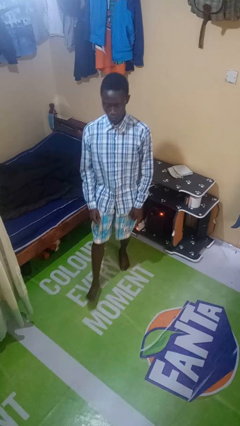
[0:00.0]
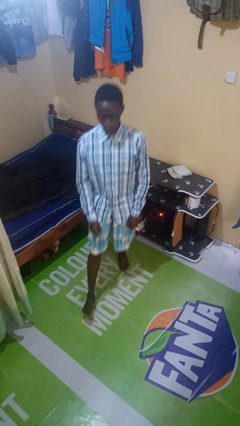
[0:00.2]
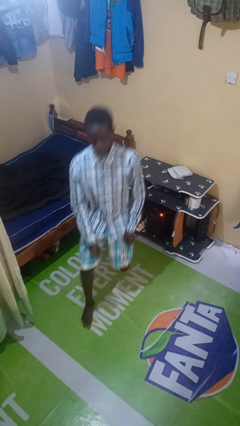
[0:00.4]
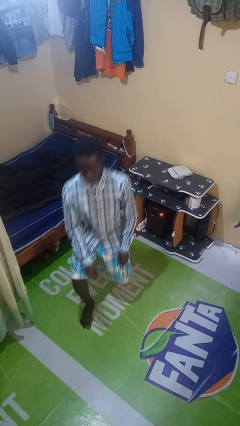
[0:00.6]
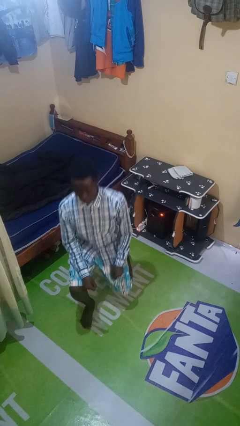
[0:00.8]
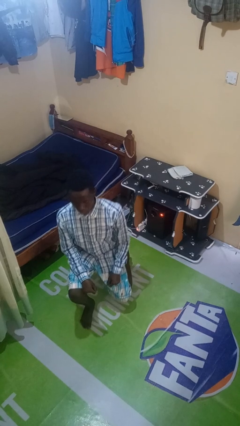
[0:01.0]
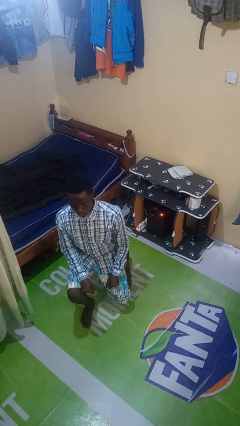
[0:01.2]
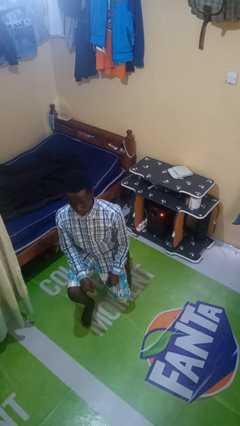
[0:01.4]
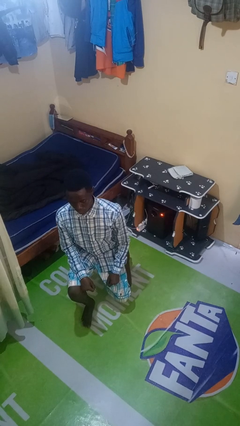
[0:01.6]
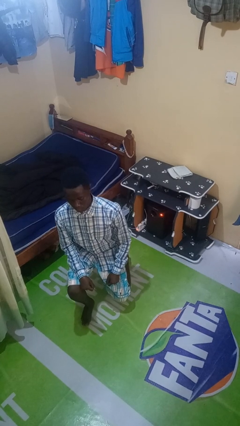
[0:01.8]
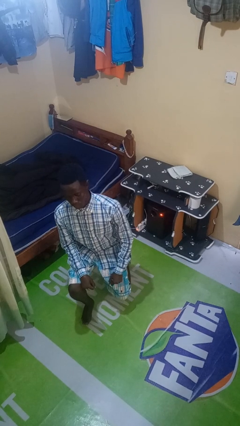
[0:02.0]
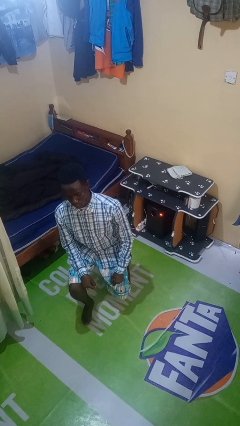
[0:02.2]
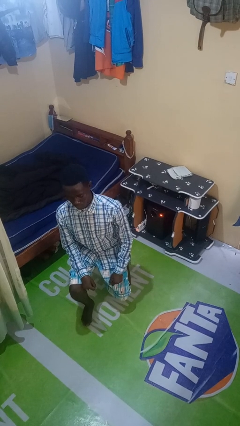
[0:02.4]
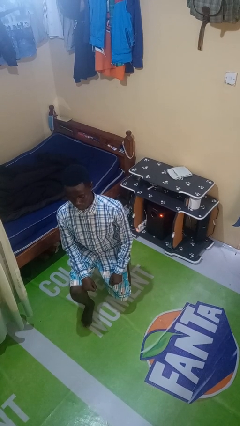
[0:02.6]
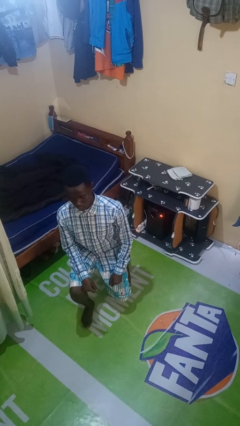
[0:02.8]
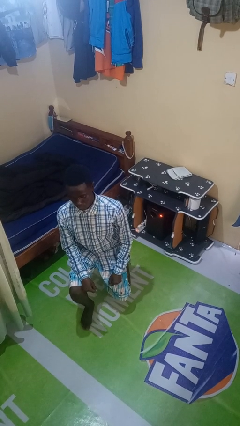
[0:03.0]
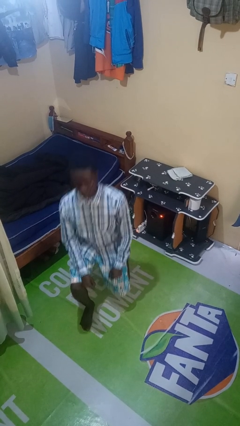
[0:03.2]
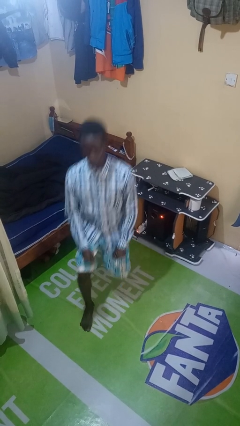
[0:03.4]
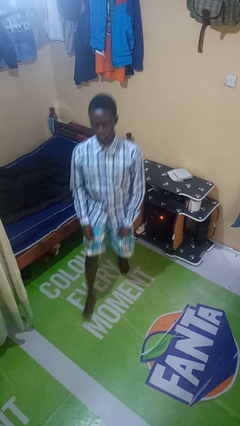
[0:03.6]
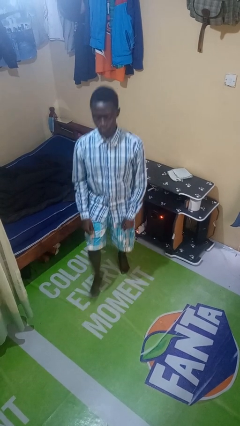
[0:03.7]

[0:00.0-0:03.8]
person exercises with lunges

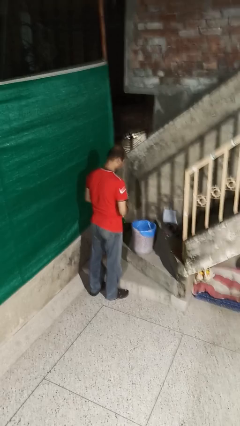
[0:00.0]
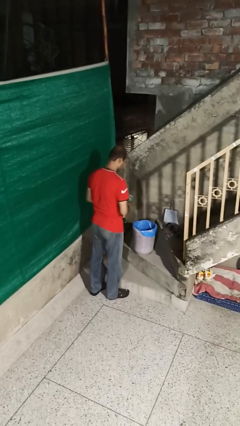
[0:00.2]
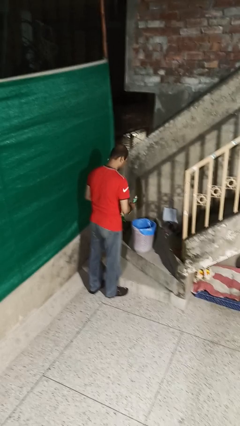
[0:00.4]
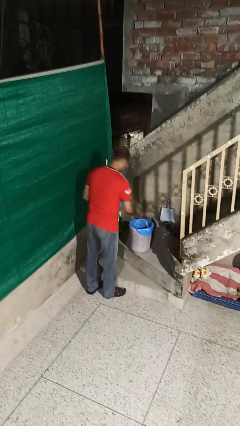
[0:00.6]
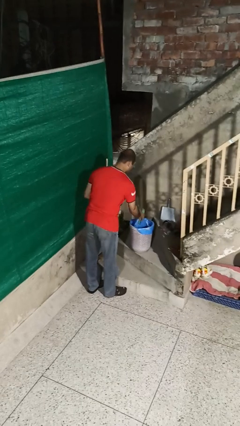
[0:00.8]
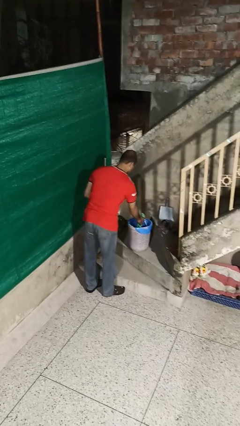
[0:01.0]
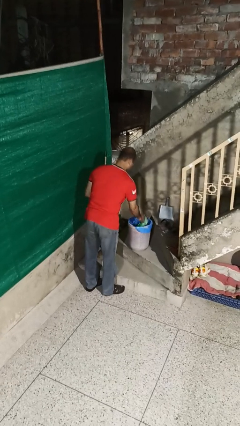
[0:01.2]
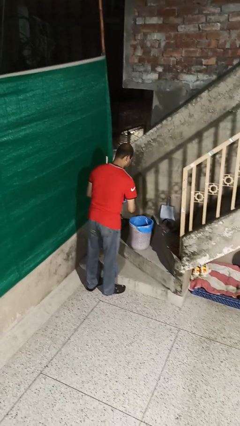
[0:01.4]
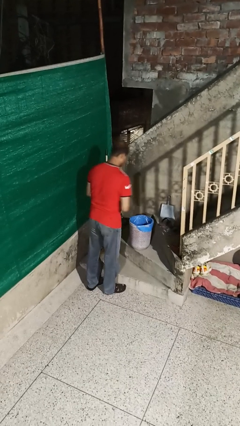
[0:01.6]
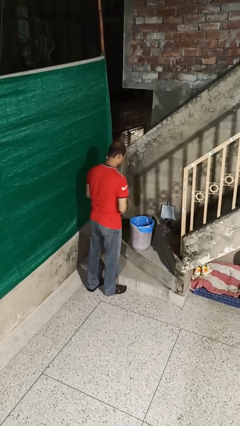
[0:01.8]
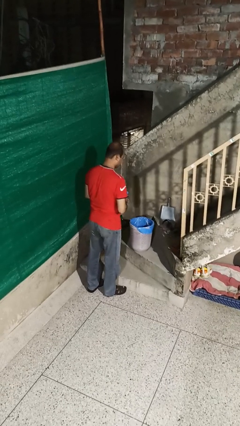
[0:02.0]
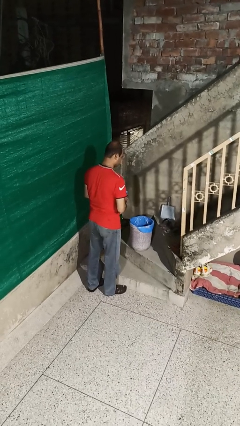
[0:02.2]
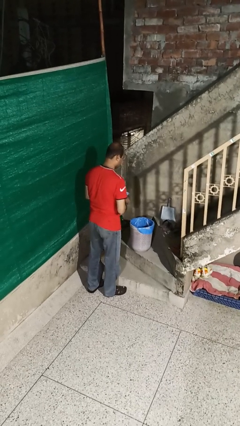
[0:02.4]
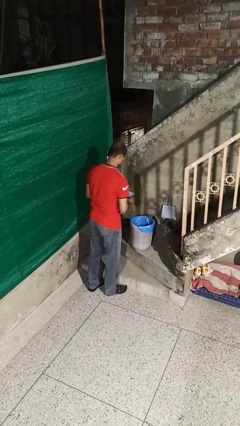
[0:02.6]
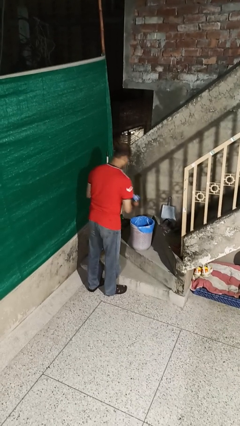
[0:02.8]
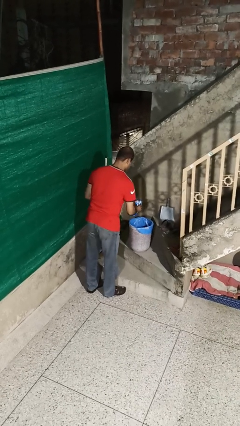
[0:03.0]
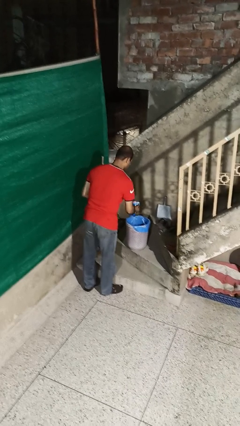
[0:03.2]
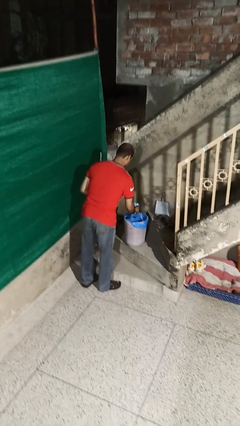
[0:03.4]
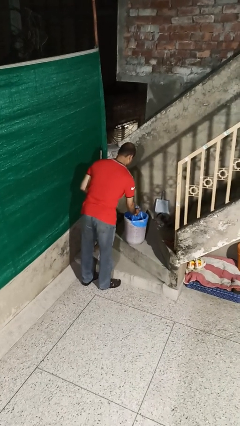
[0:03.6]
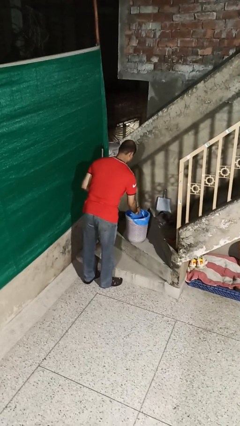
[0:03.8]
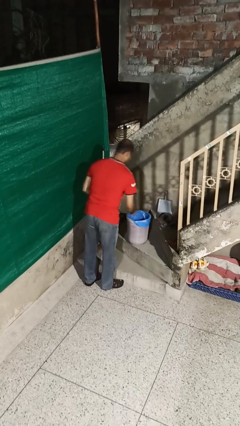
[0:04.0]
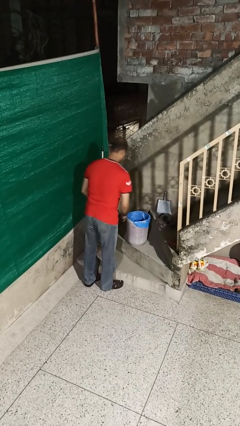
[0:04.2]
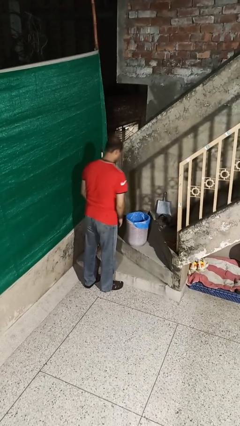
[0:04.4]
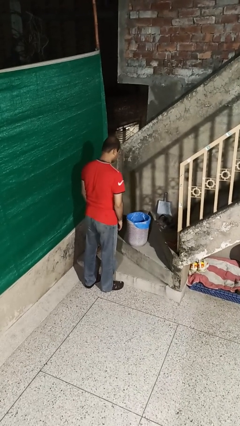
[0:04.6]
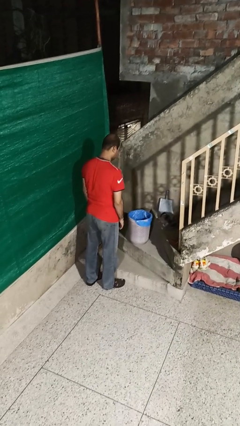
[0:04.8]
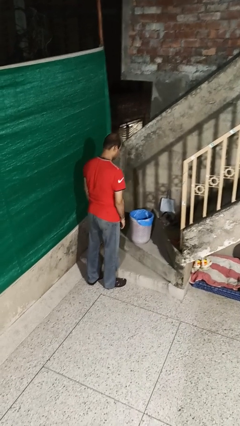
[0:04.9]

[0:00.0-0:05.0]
person discards trash

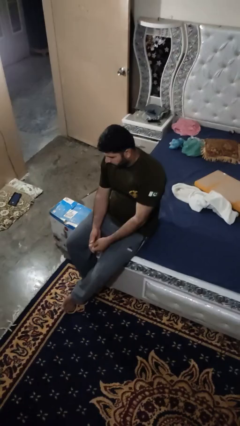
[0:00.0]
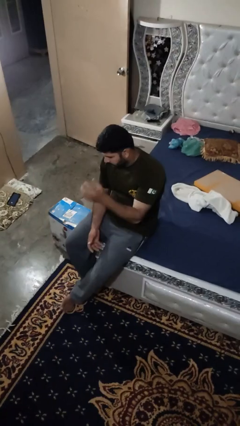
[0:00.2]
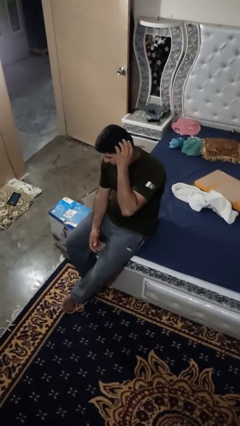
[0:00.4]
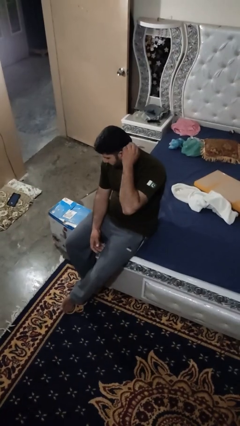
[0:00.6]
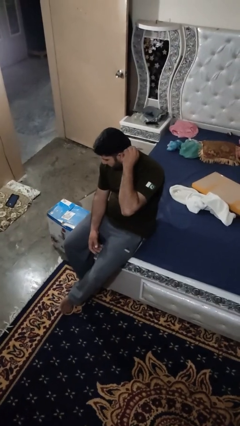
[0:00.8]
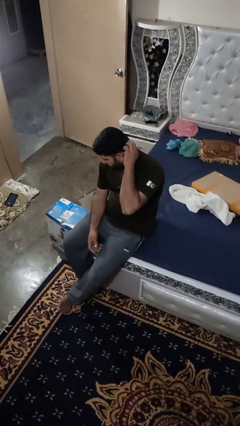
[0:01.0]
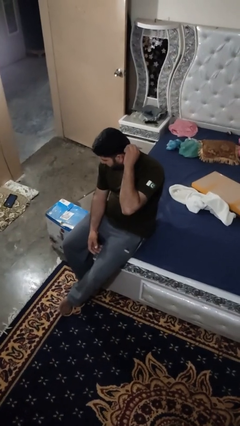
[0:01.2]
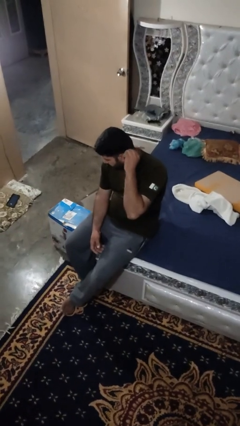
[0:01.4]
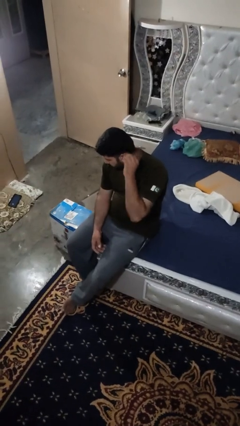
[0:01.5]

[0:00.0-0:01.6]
person strokes hair

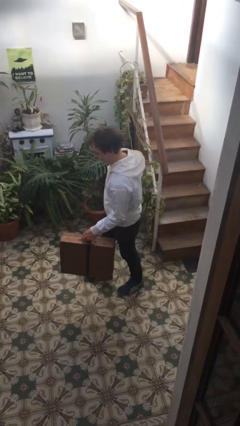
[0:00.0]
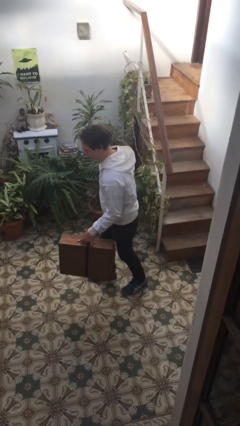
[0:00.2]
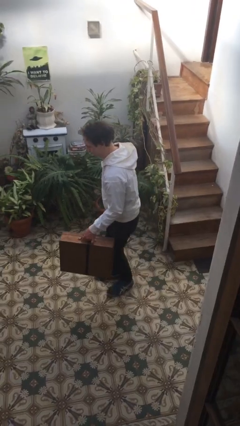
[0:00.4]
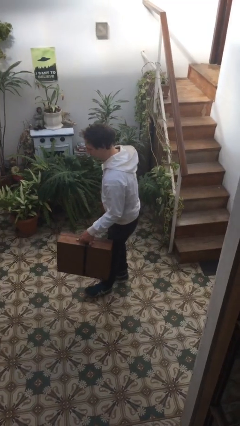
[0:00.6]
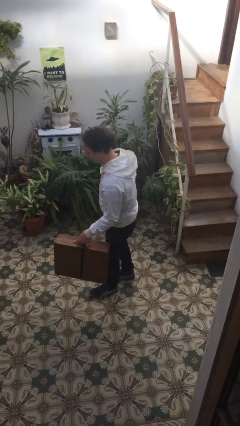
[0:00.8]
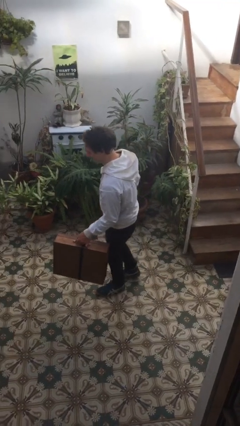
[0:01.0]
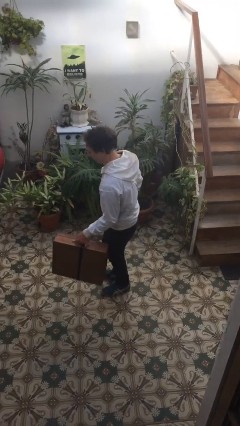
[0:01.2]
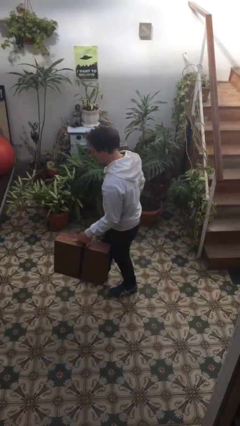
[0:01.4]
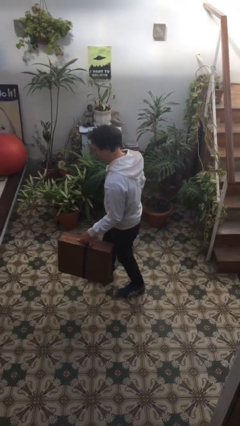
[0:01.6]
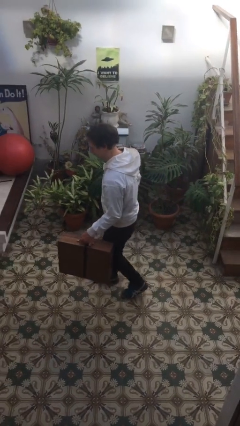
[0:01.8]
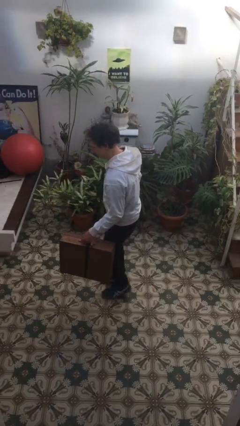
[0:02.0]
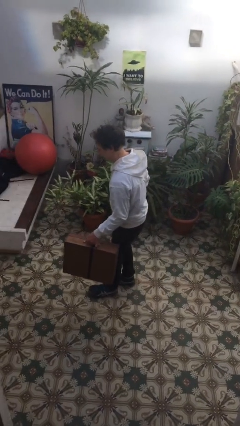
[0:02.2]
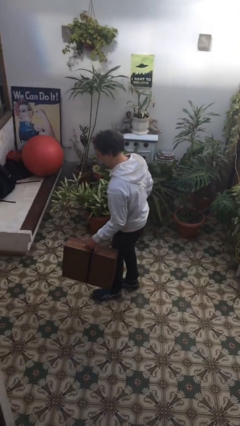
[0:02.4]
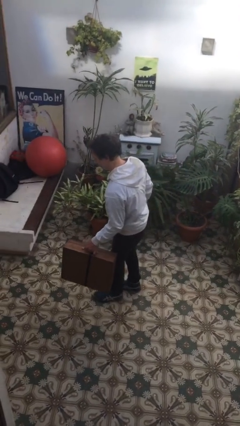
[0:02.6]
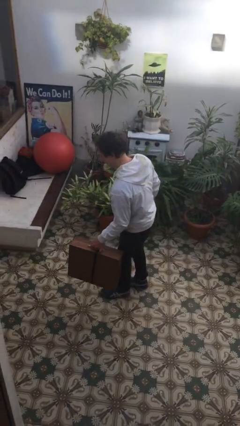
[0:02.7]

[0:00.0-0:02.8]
person carries heavy object

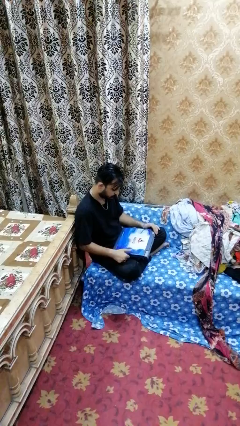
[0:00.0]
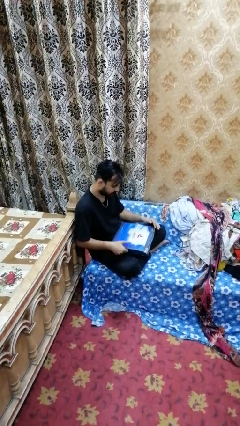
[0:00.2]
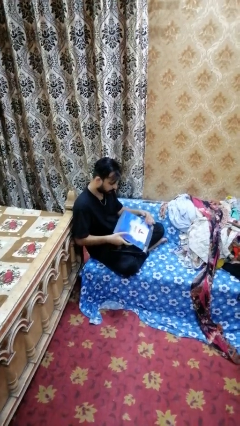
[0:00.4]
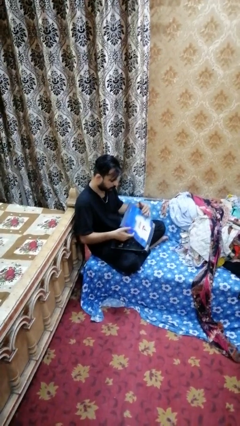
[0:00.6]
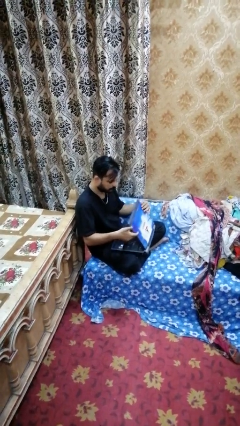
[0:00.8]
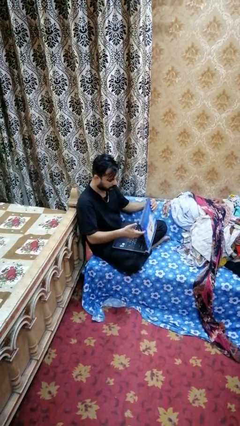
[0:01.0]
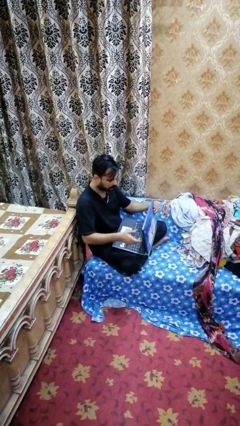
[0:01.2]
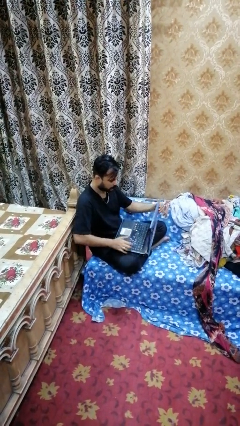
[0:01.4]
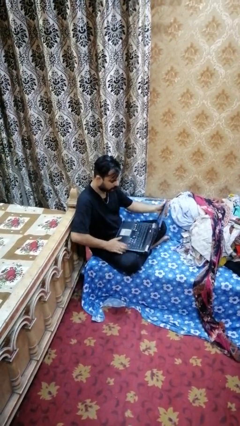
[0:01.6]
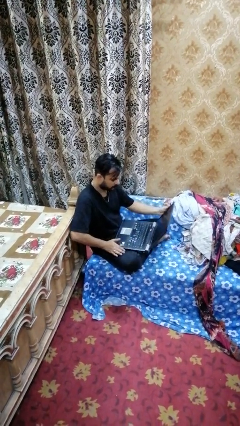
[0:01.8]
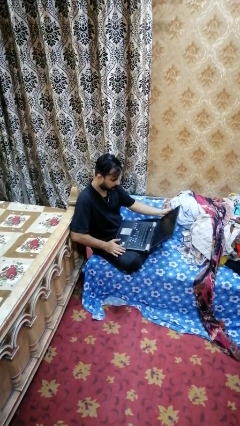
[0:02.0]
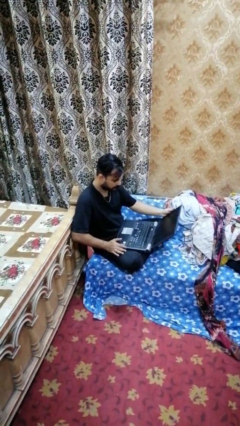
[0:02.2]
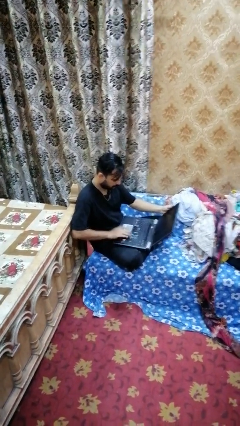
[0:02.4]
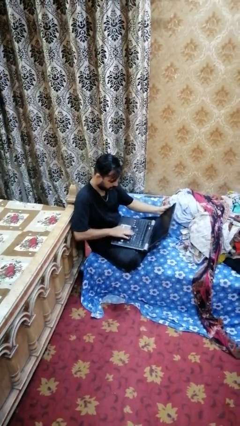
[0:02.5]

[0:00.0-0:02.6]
person opens laptop

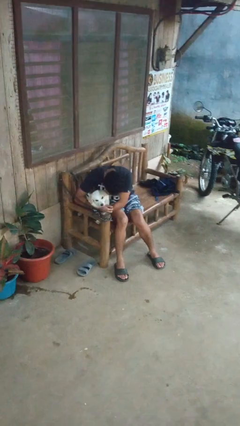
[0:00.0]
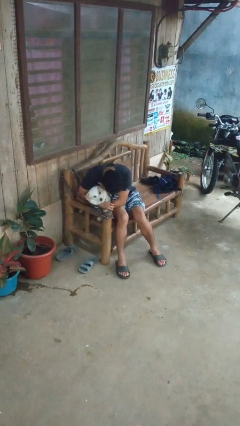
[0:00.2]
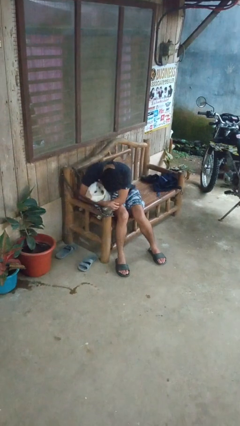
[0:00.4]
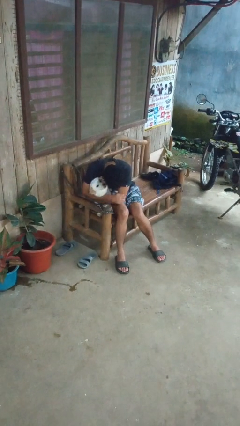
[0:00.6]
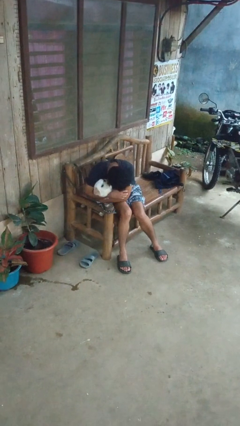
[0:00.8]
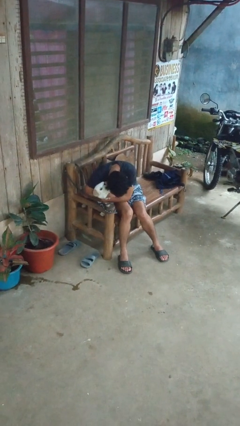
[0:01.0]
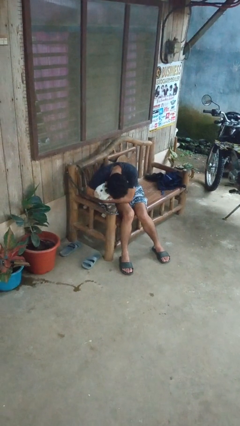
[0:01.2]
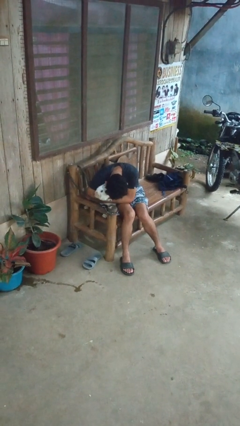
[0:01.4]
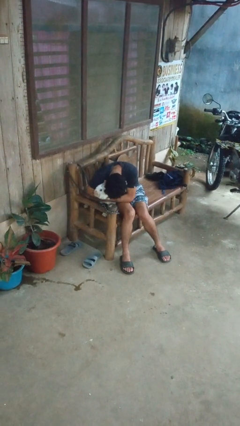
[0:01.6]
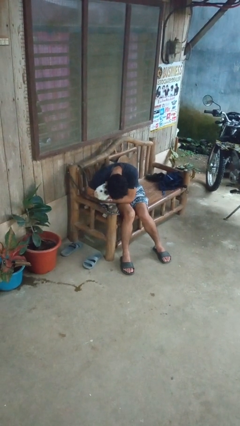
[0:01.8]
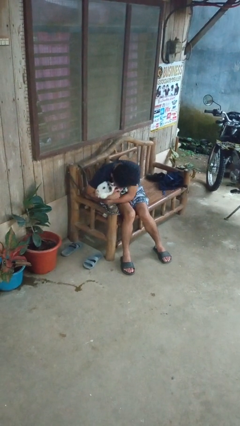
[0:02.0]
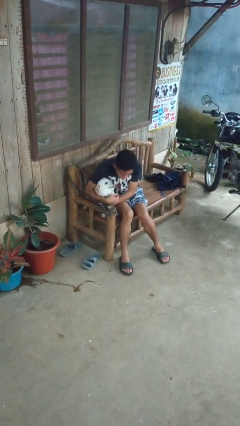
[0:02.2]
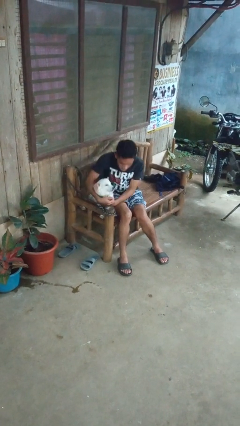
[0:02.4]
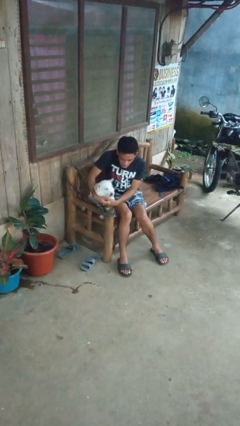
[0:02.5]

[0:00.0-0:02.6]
person hugs dog
